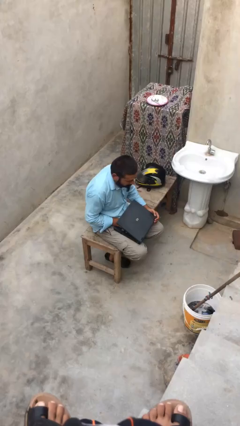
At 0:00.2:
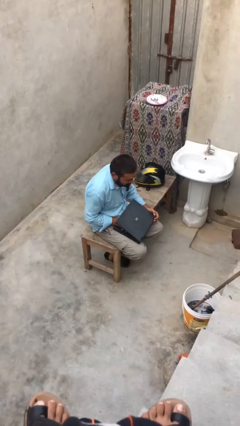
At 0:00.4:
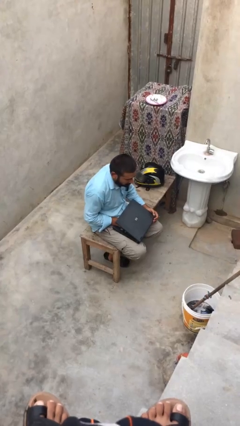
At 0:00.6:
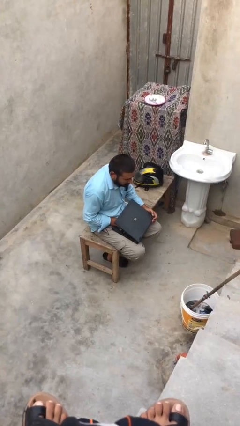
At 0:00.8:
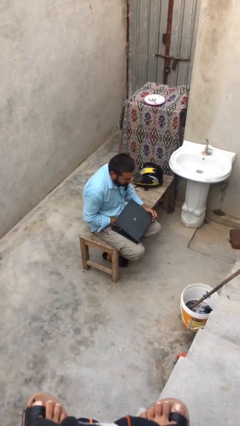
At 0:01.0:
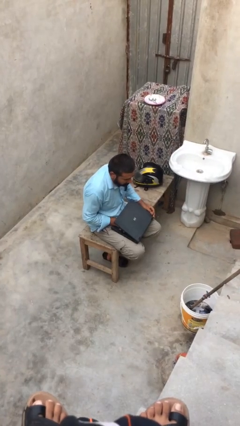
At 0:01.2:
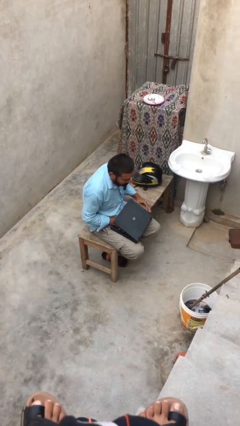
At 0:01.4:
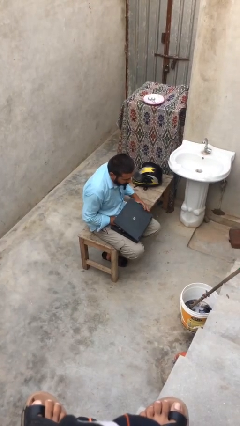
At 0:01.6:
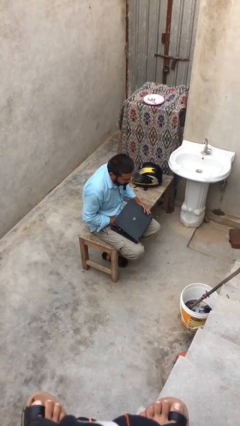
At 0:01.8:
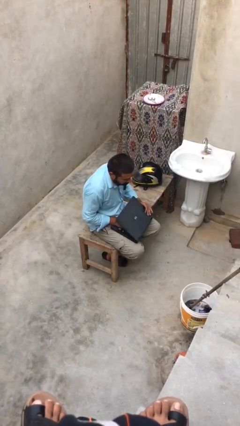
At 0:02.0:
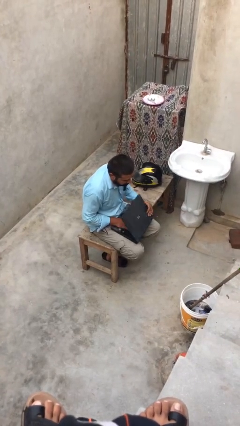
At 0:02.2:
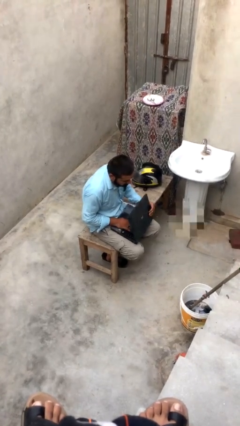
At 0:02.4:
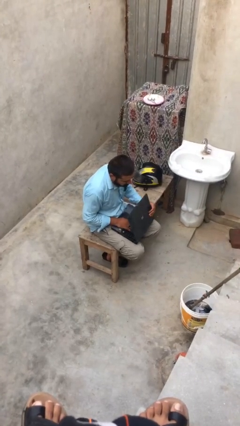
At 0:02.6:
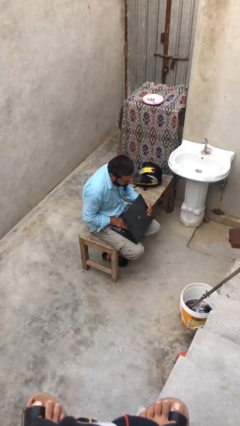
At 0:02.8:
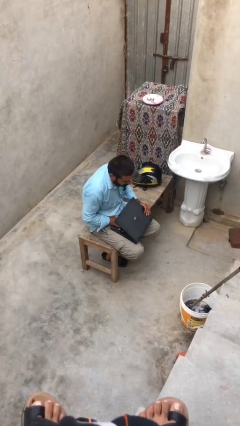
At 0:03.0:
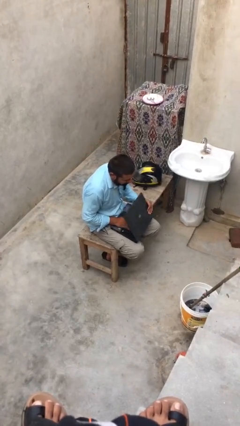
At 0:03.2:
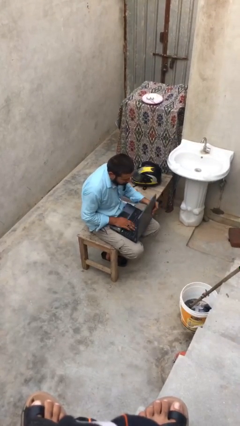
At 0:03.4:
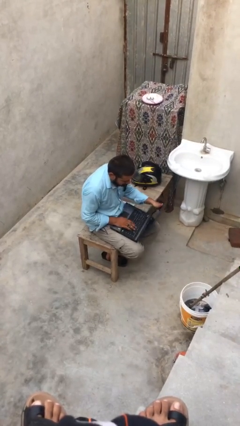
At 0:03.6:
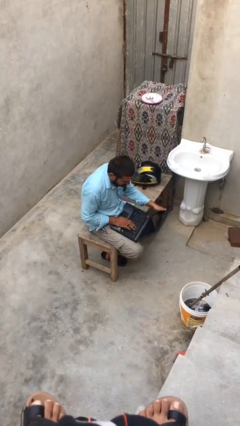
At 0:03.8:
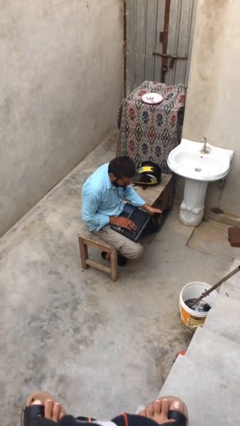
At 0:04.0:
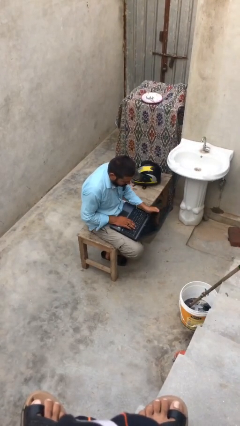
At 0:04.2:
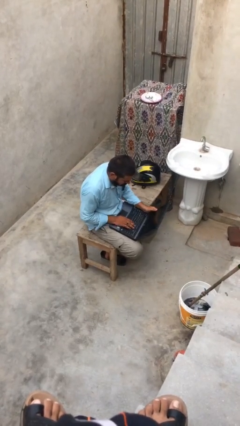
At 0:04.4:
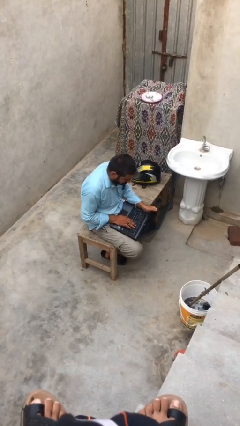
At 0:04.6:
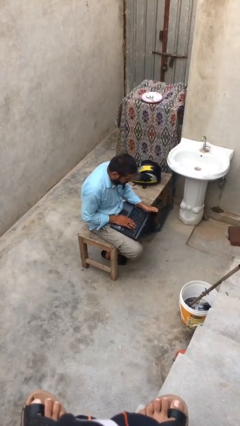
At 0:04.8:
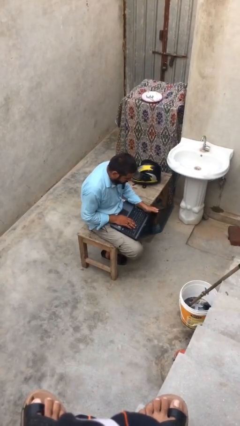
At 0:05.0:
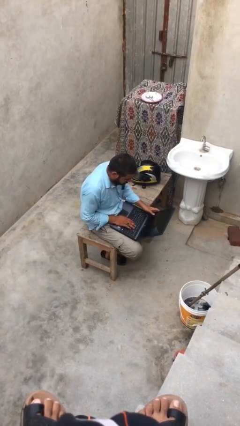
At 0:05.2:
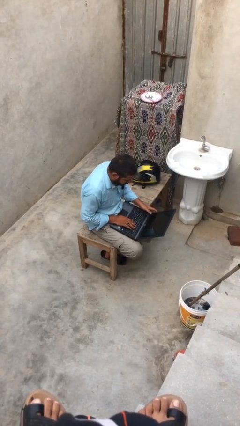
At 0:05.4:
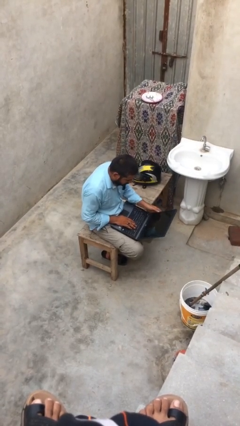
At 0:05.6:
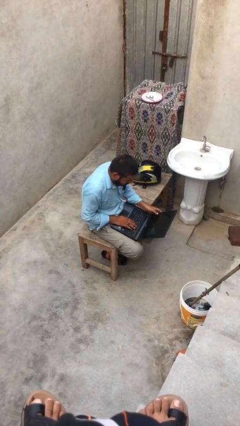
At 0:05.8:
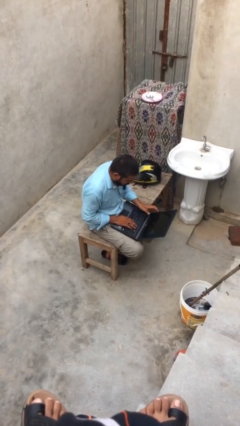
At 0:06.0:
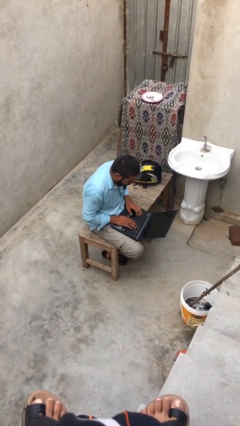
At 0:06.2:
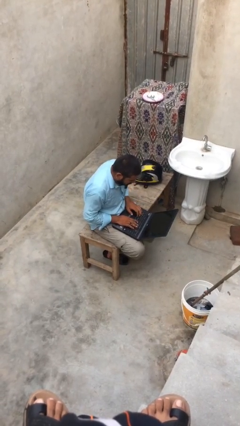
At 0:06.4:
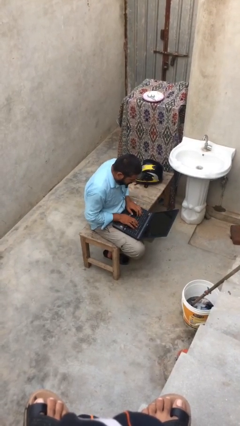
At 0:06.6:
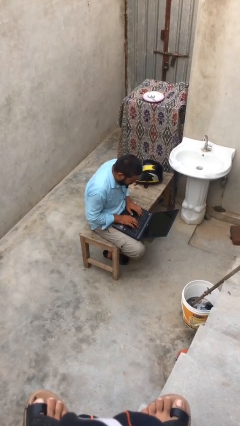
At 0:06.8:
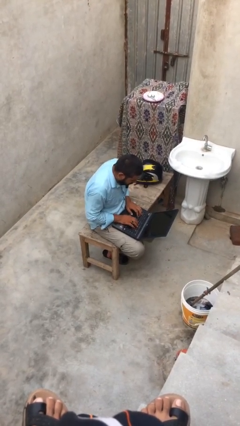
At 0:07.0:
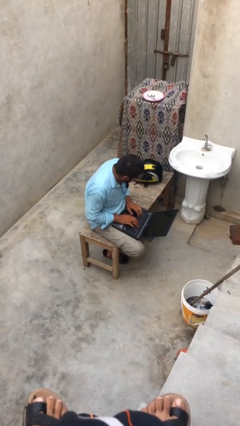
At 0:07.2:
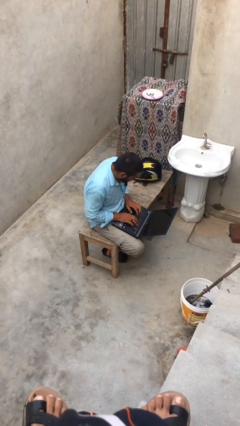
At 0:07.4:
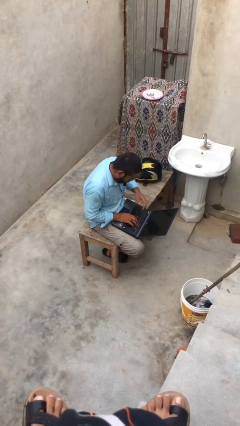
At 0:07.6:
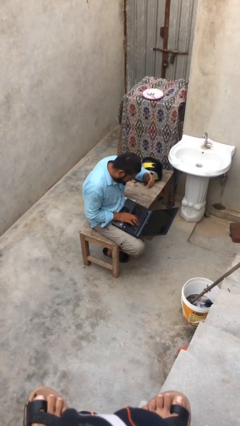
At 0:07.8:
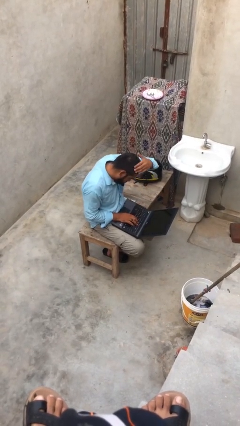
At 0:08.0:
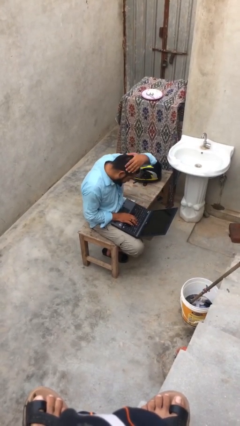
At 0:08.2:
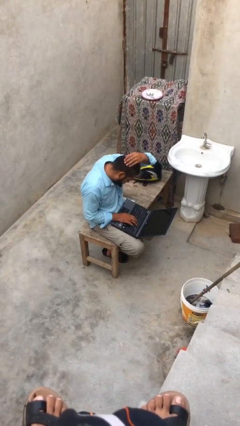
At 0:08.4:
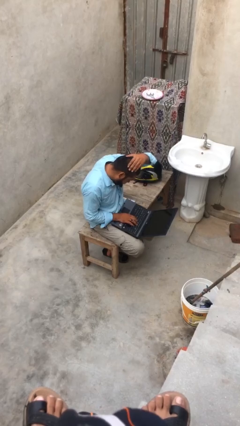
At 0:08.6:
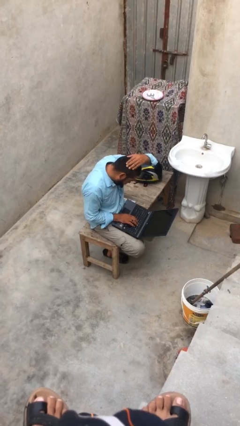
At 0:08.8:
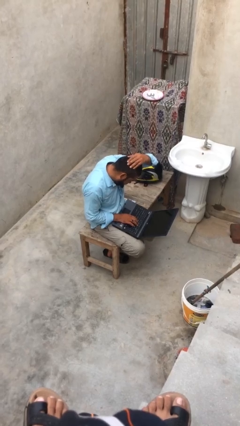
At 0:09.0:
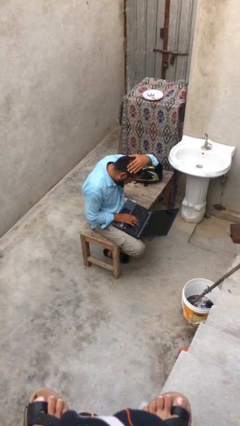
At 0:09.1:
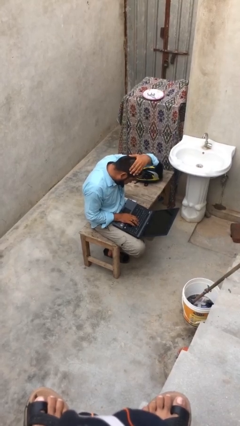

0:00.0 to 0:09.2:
person interacts with laptop

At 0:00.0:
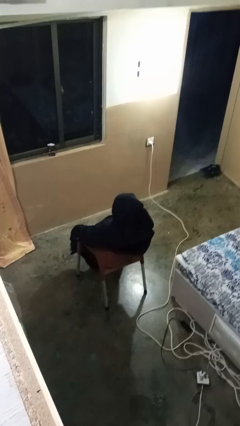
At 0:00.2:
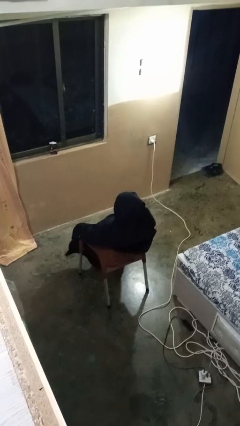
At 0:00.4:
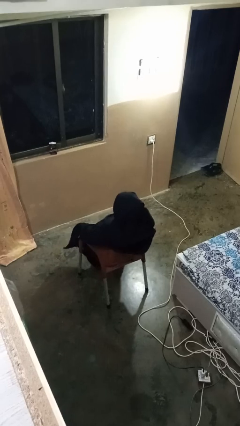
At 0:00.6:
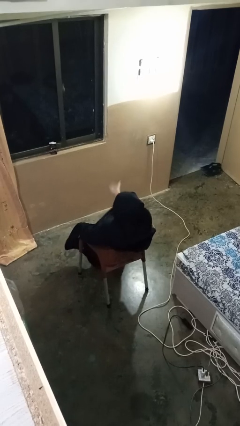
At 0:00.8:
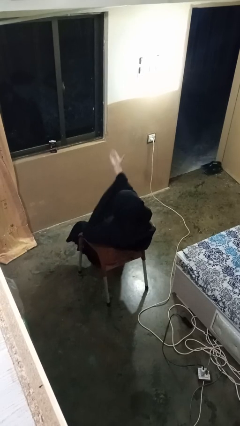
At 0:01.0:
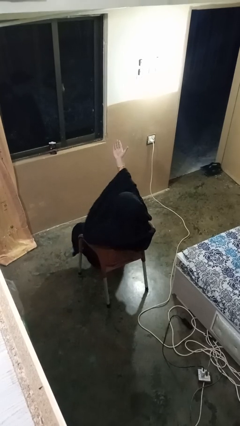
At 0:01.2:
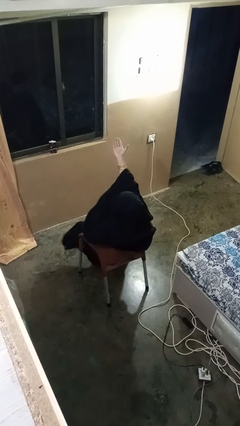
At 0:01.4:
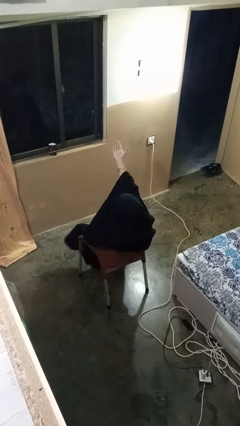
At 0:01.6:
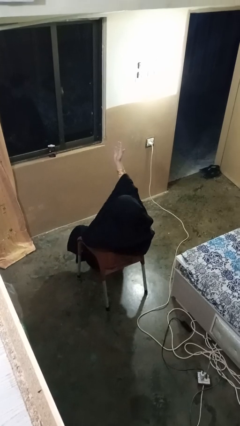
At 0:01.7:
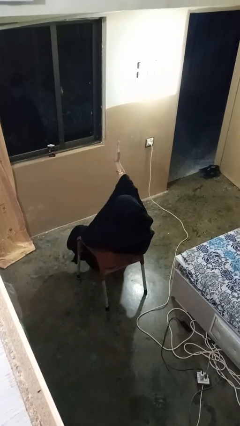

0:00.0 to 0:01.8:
person gestures swipe up

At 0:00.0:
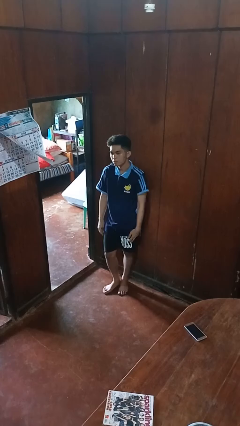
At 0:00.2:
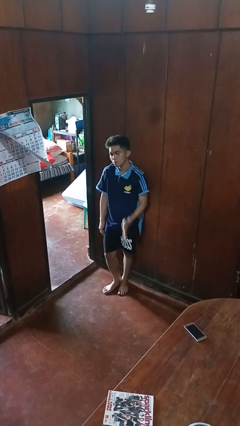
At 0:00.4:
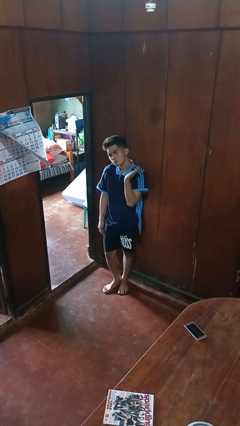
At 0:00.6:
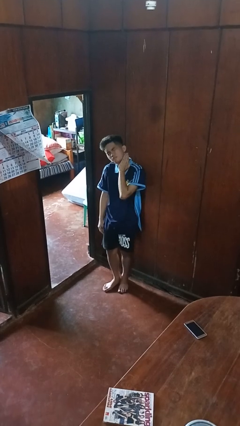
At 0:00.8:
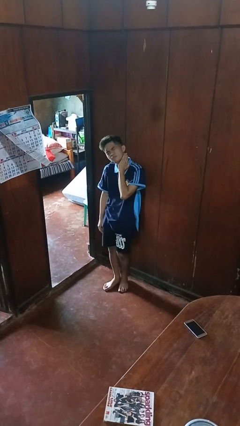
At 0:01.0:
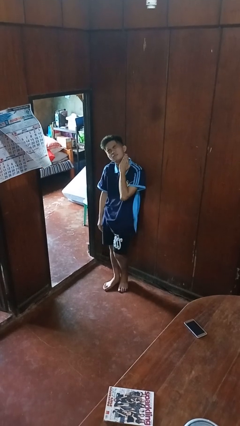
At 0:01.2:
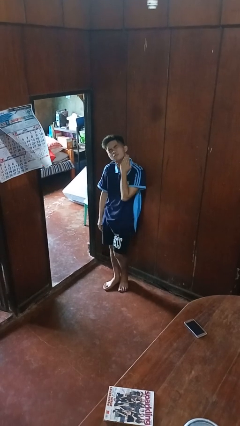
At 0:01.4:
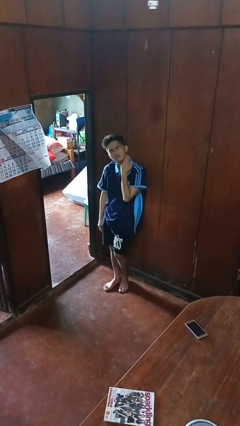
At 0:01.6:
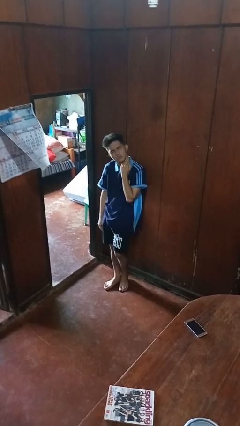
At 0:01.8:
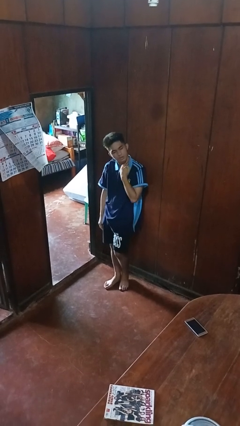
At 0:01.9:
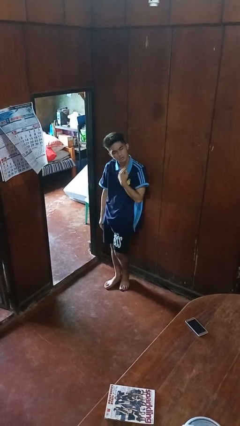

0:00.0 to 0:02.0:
person swats bug

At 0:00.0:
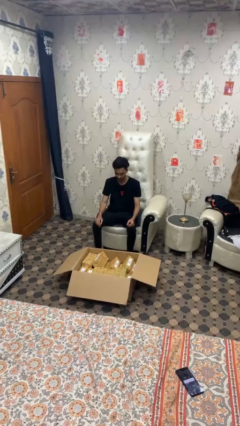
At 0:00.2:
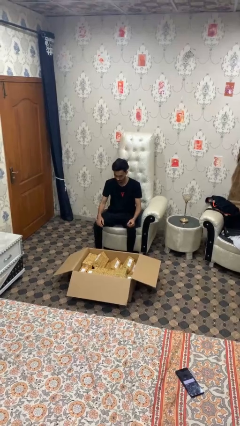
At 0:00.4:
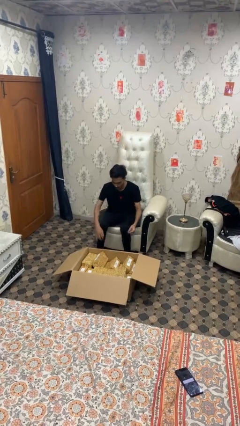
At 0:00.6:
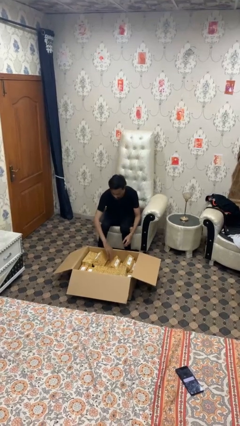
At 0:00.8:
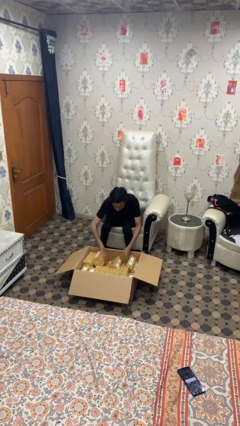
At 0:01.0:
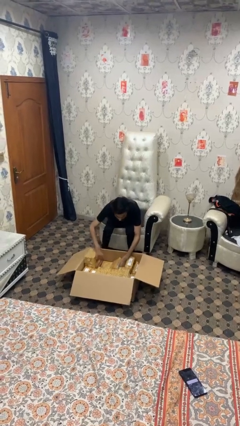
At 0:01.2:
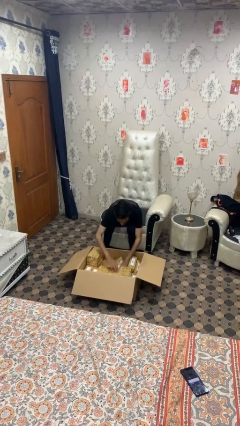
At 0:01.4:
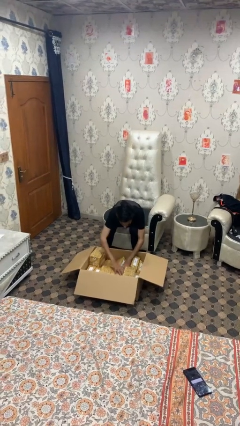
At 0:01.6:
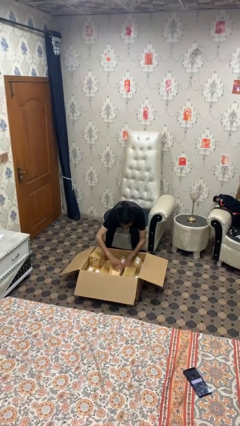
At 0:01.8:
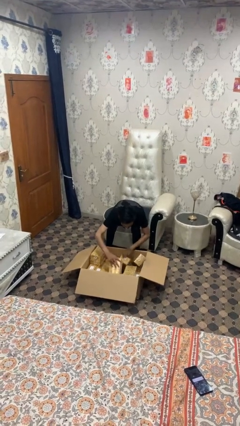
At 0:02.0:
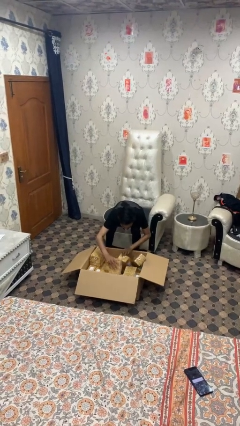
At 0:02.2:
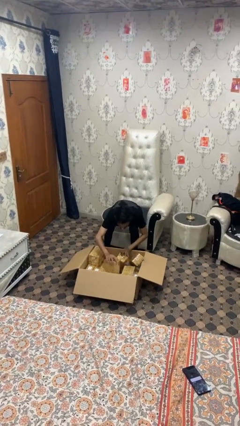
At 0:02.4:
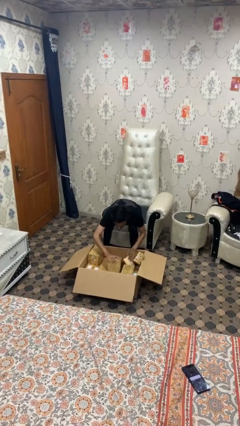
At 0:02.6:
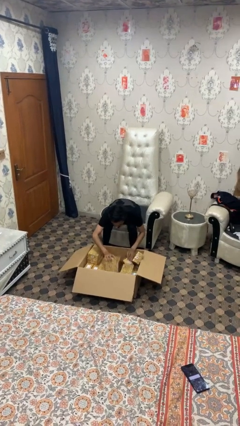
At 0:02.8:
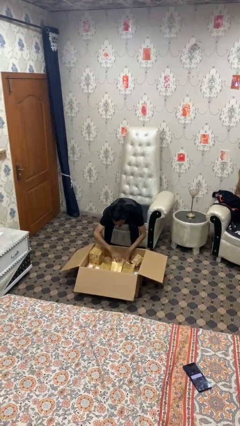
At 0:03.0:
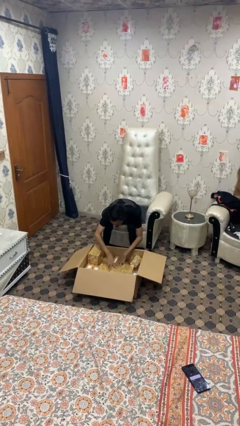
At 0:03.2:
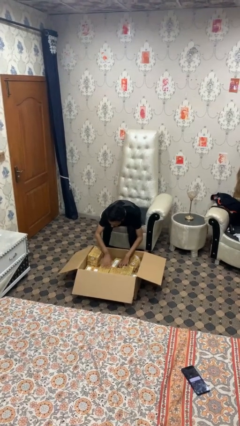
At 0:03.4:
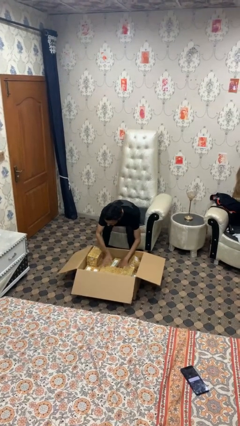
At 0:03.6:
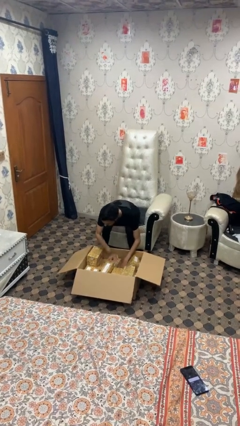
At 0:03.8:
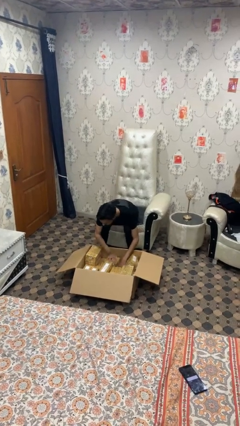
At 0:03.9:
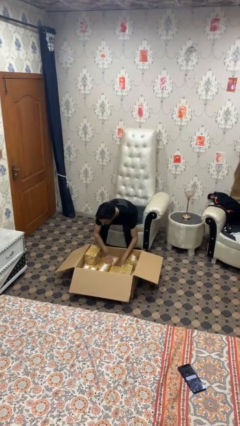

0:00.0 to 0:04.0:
person searches in box

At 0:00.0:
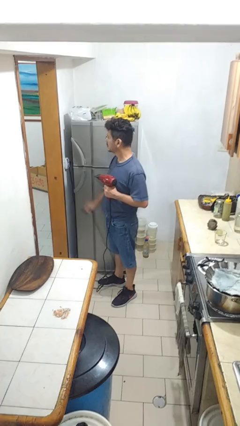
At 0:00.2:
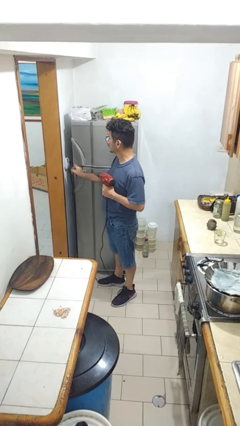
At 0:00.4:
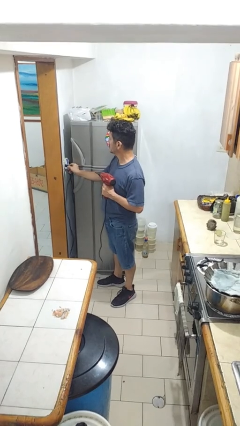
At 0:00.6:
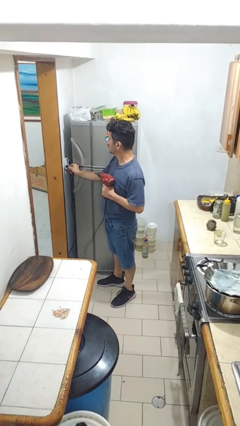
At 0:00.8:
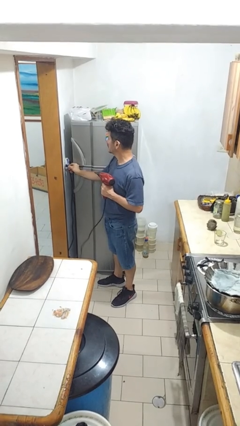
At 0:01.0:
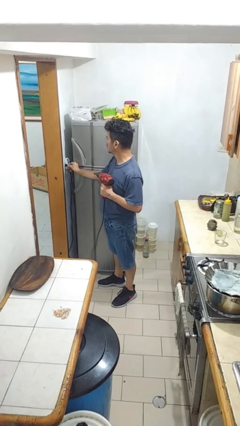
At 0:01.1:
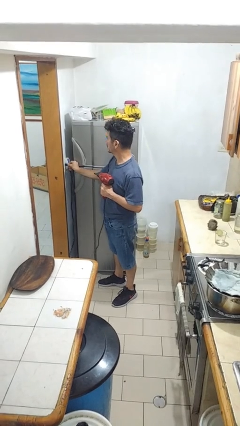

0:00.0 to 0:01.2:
person plugs into electrical socket
